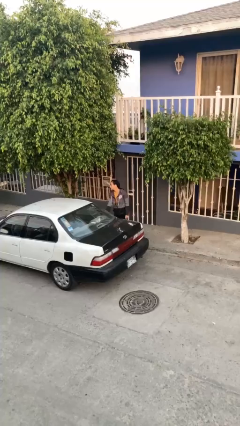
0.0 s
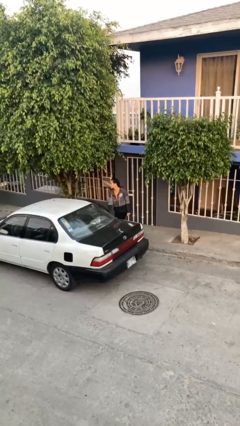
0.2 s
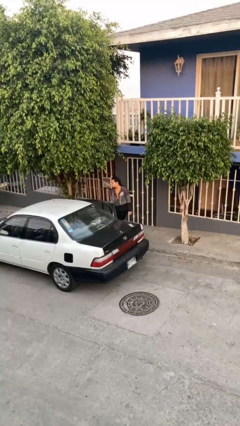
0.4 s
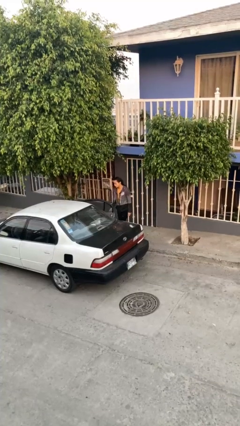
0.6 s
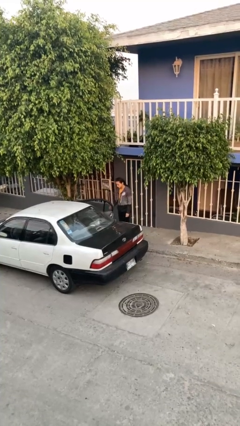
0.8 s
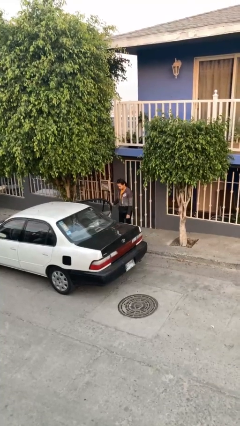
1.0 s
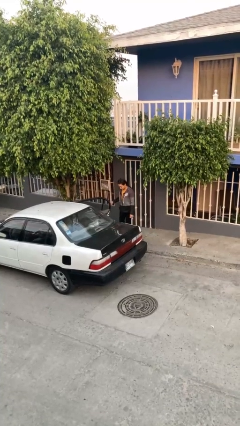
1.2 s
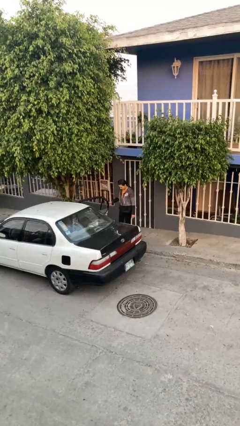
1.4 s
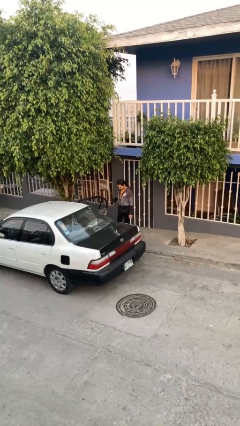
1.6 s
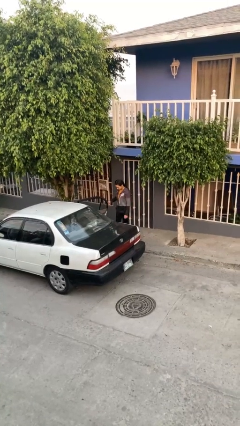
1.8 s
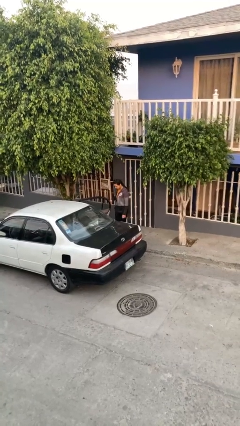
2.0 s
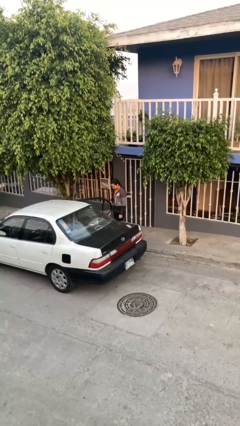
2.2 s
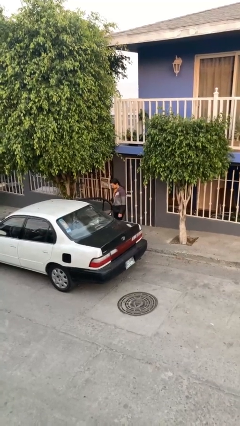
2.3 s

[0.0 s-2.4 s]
person opens car door

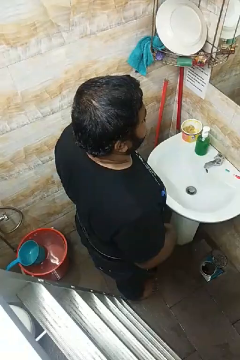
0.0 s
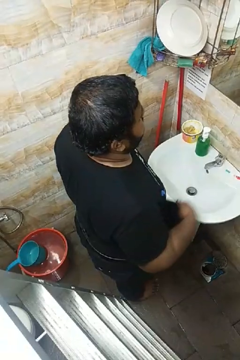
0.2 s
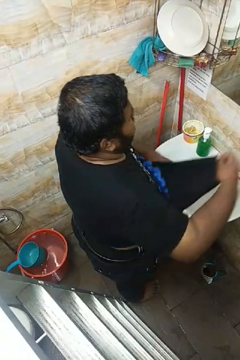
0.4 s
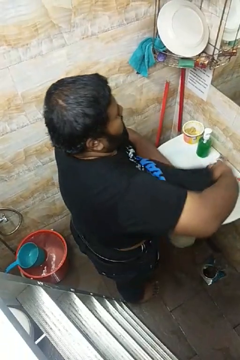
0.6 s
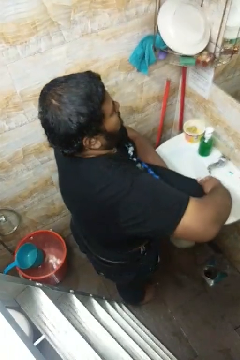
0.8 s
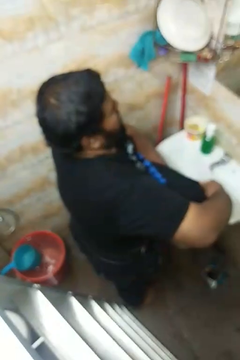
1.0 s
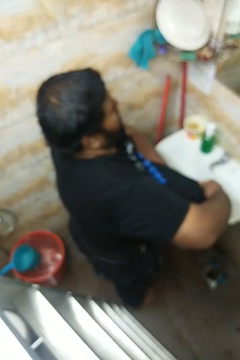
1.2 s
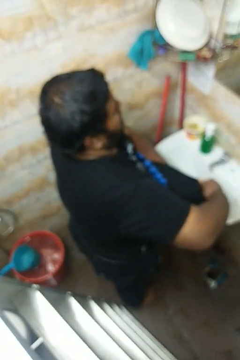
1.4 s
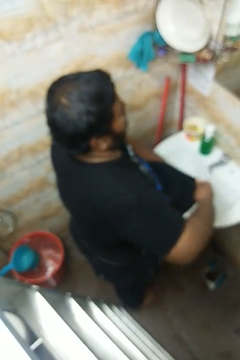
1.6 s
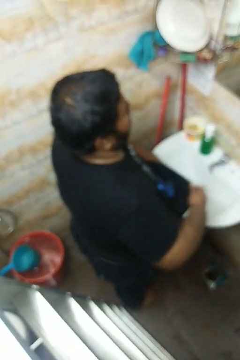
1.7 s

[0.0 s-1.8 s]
person applies deodorant

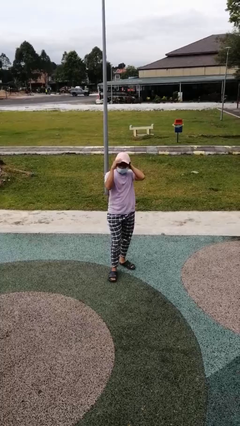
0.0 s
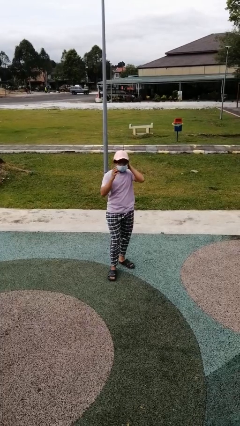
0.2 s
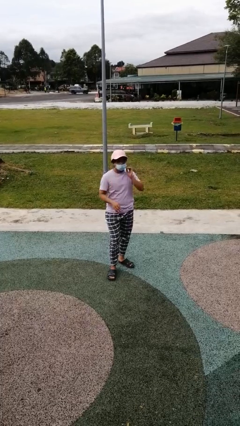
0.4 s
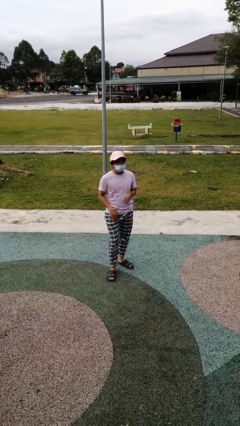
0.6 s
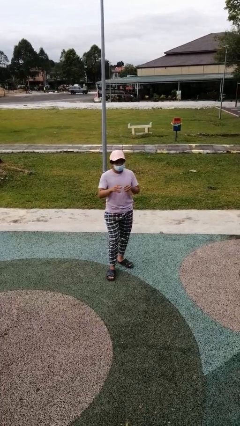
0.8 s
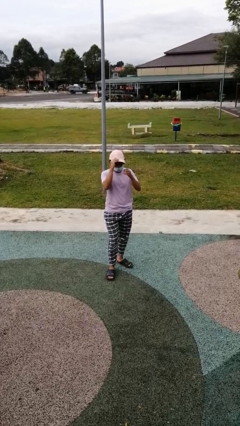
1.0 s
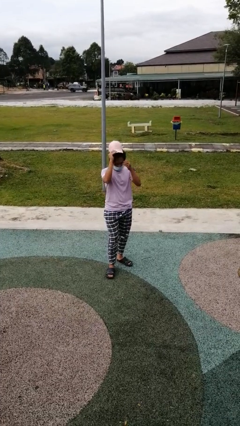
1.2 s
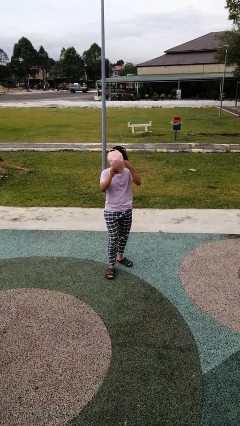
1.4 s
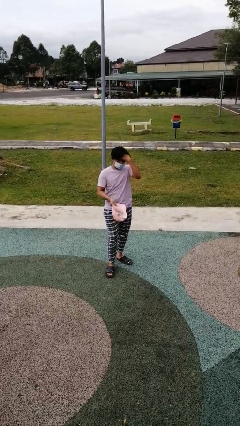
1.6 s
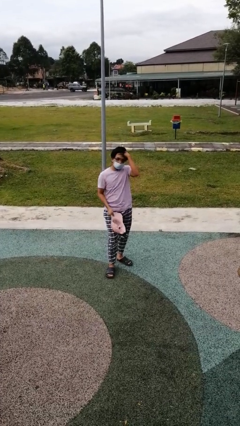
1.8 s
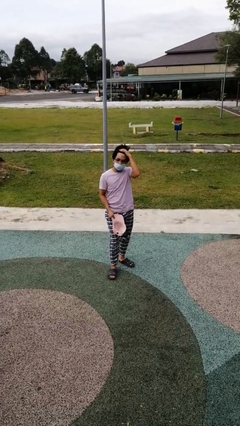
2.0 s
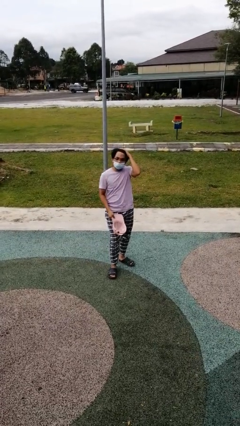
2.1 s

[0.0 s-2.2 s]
person takes off hat

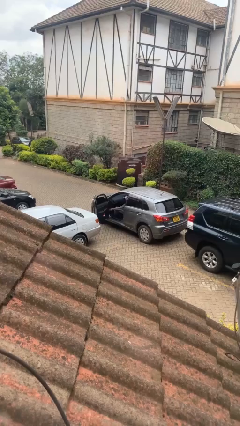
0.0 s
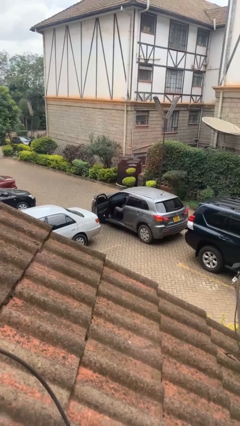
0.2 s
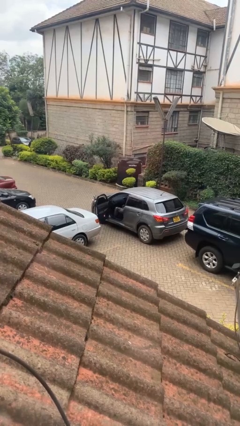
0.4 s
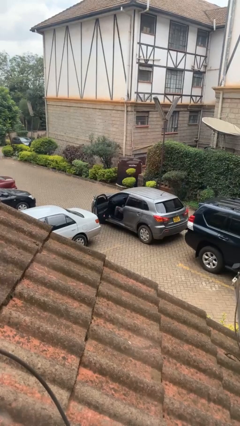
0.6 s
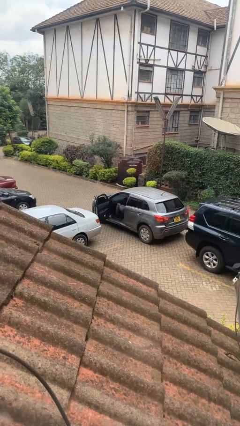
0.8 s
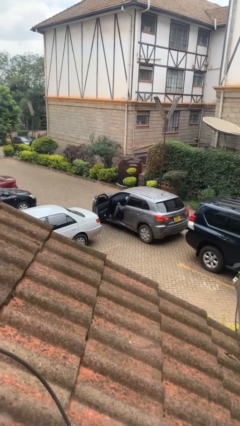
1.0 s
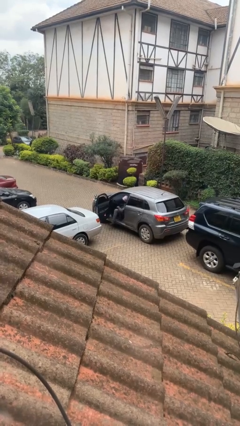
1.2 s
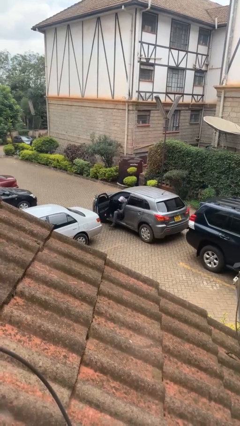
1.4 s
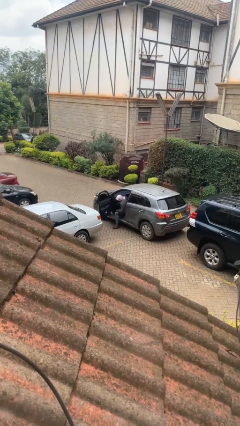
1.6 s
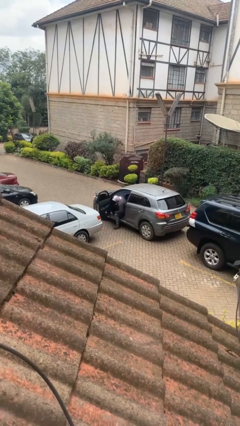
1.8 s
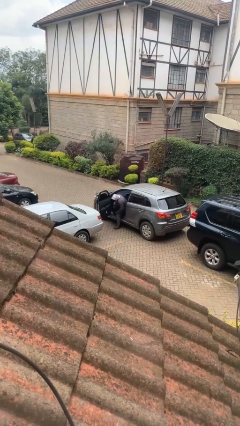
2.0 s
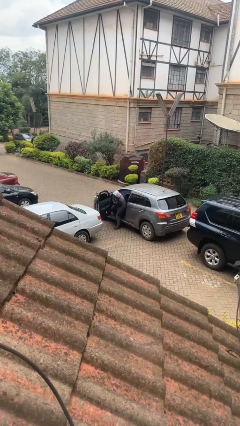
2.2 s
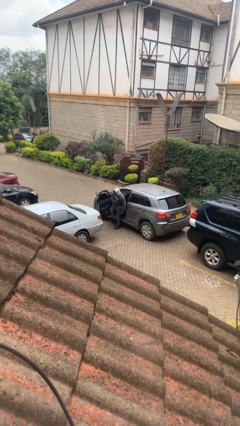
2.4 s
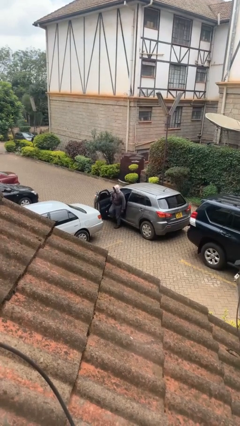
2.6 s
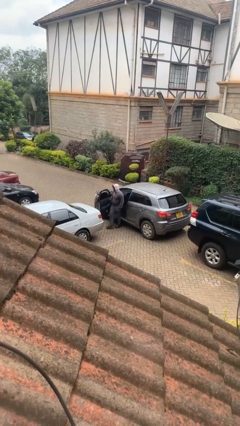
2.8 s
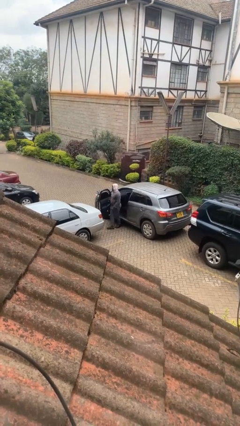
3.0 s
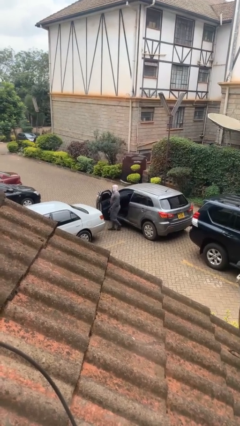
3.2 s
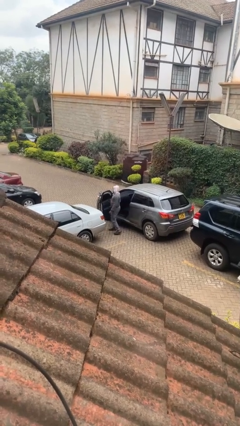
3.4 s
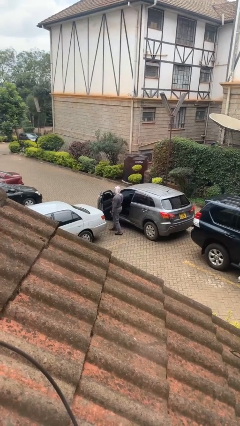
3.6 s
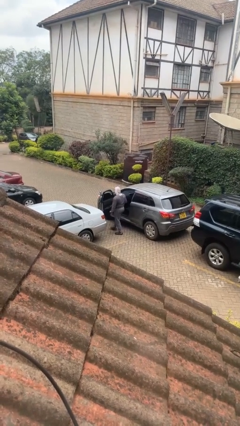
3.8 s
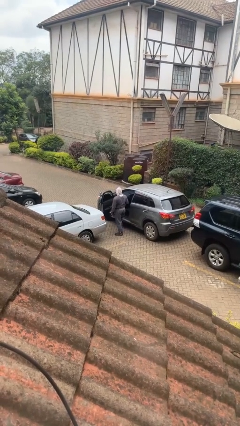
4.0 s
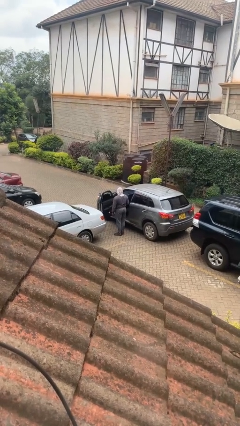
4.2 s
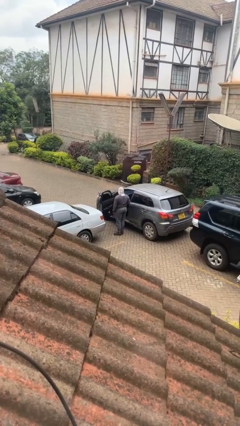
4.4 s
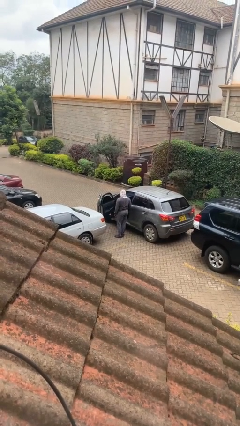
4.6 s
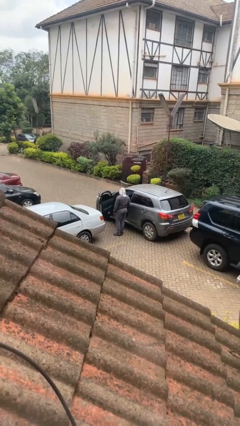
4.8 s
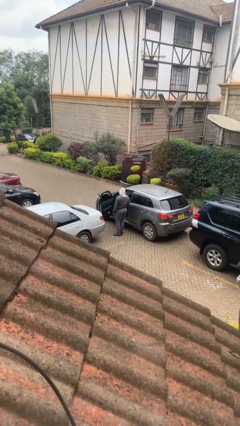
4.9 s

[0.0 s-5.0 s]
person exits car

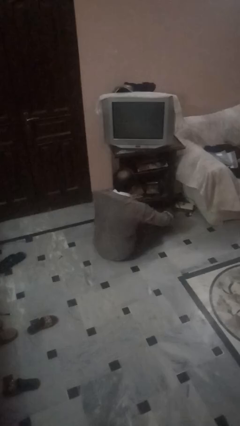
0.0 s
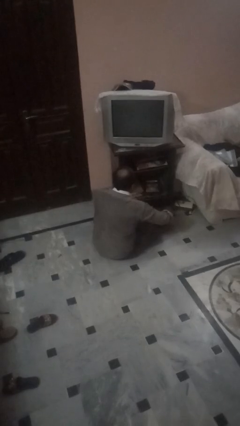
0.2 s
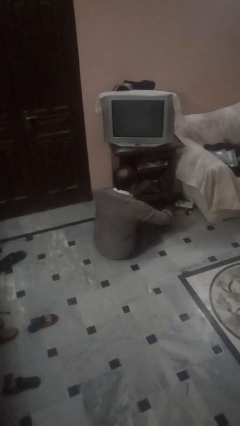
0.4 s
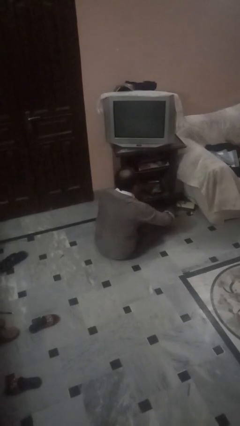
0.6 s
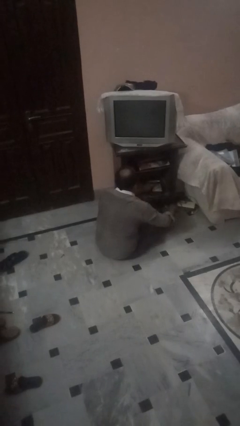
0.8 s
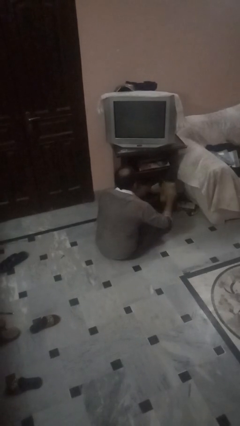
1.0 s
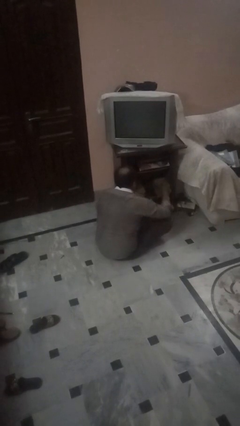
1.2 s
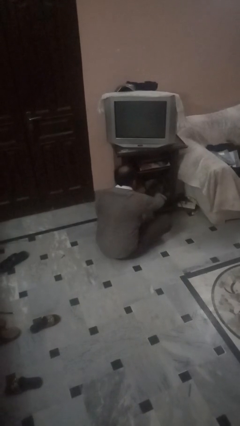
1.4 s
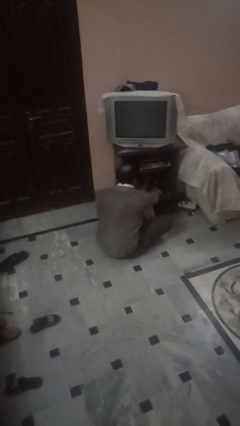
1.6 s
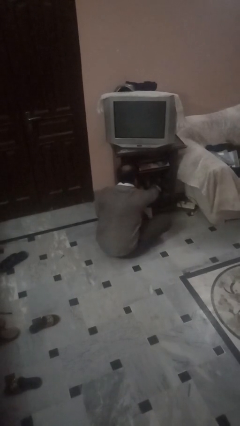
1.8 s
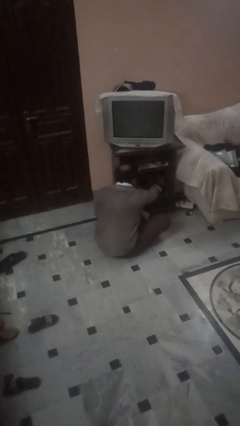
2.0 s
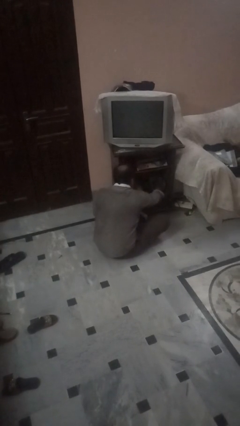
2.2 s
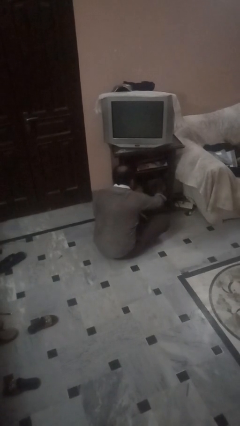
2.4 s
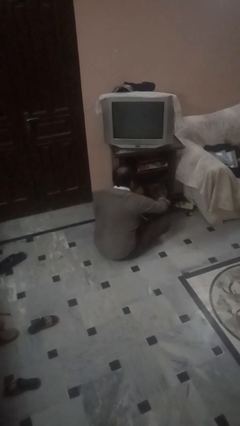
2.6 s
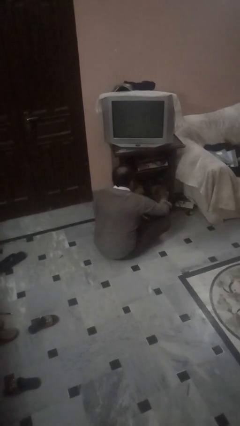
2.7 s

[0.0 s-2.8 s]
person dusts furniture

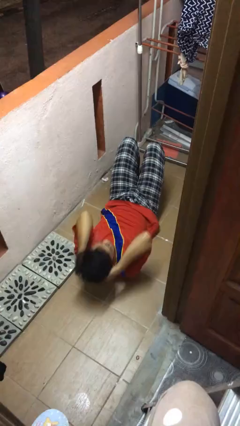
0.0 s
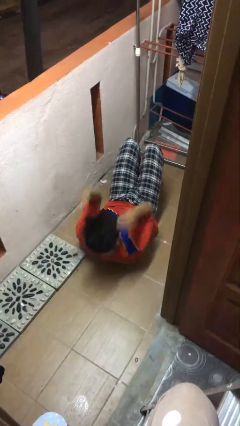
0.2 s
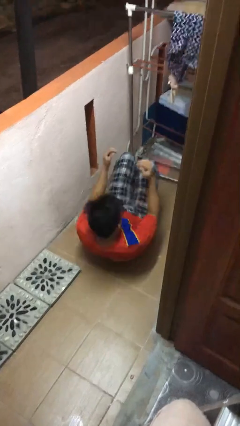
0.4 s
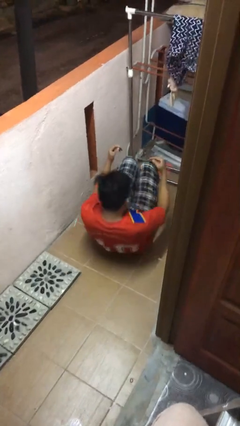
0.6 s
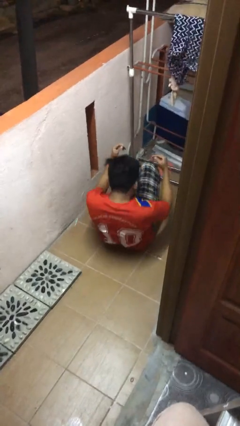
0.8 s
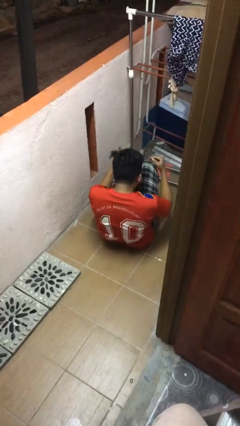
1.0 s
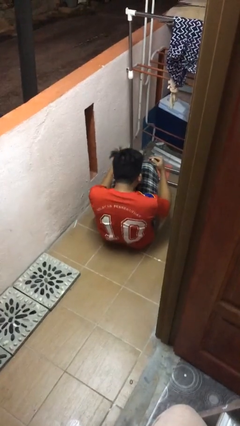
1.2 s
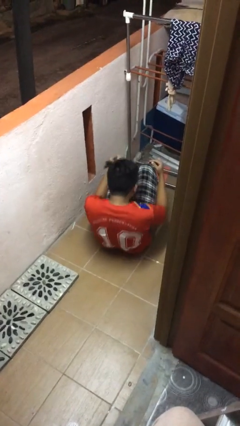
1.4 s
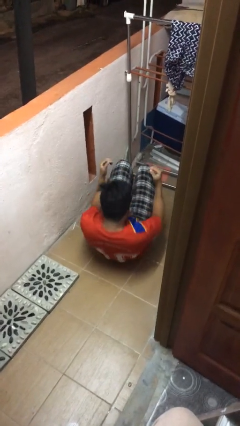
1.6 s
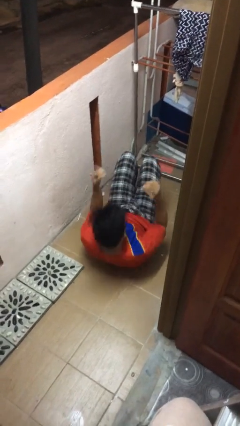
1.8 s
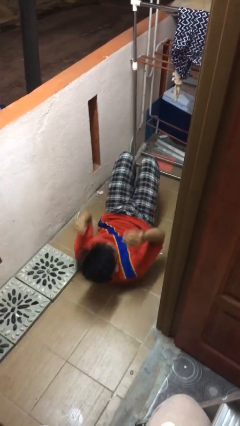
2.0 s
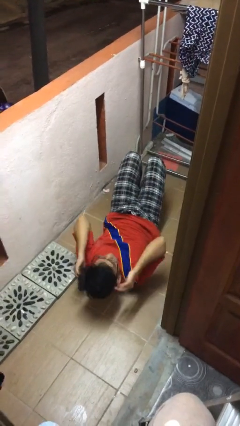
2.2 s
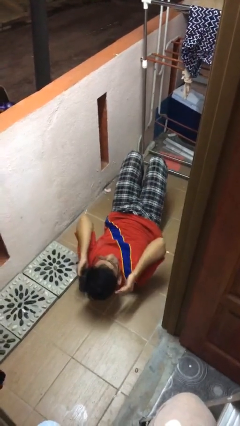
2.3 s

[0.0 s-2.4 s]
person exercises with situp

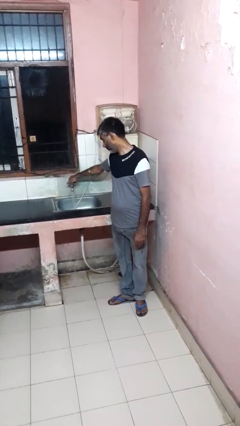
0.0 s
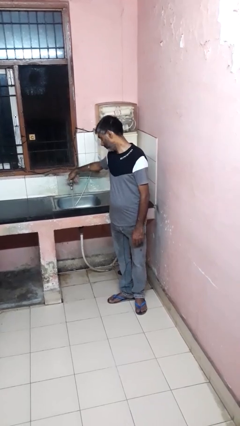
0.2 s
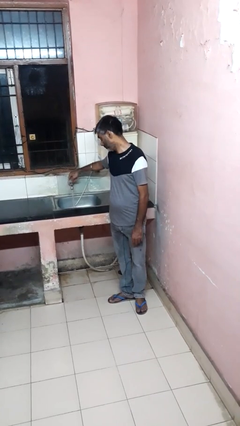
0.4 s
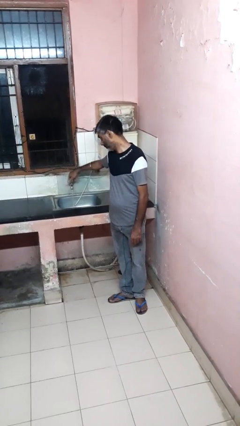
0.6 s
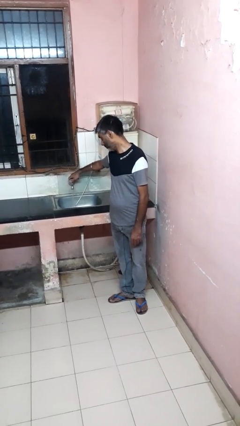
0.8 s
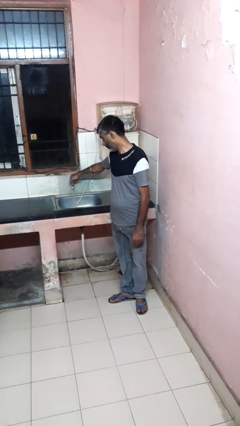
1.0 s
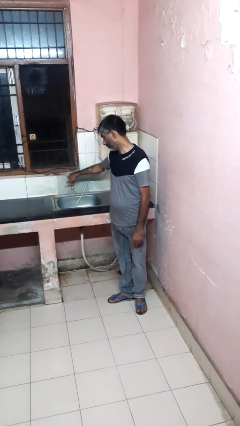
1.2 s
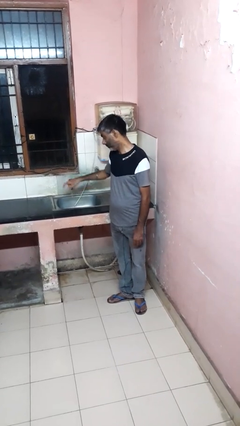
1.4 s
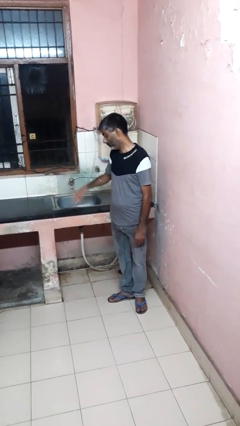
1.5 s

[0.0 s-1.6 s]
person turns off faucet
